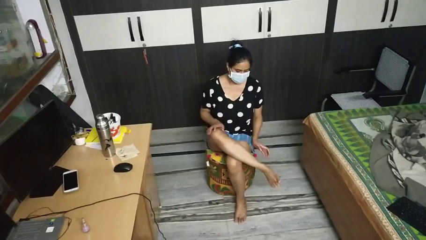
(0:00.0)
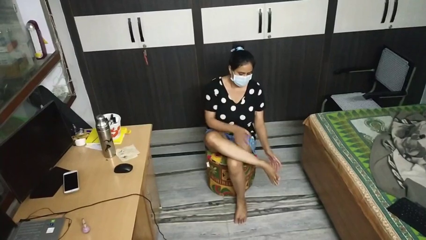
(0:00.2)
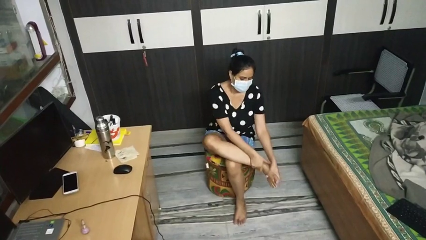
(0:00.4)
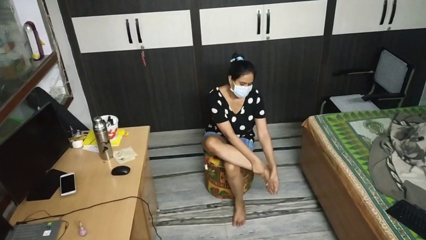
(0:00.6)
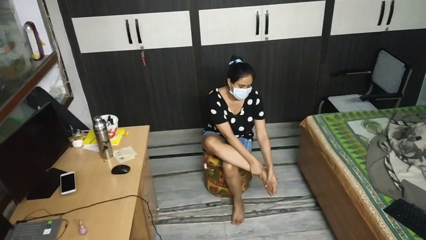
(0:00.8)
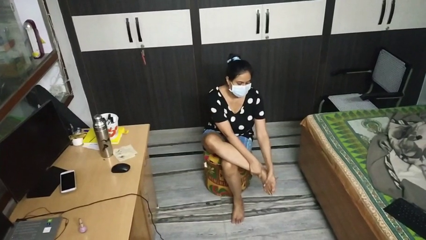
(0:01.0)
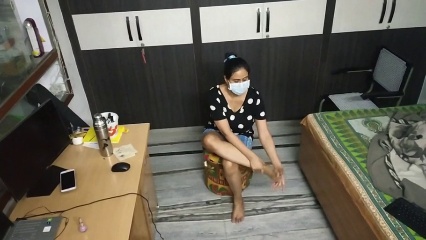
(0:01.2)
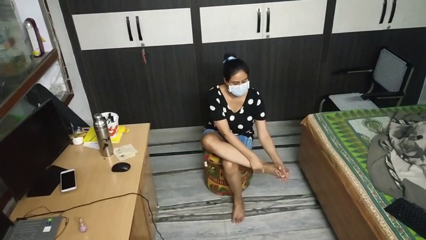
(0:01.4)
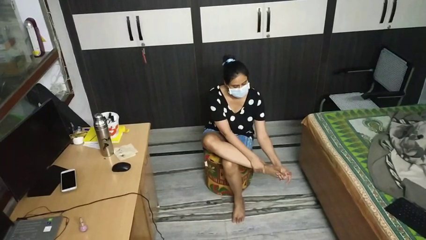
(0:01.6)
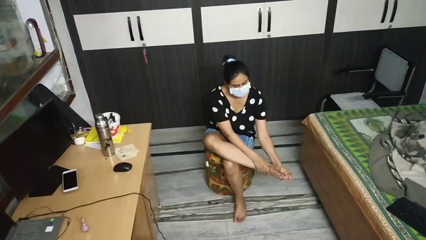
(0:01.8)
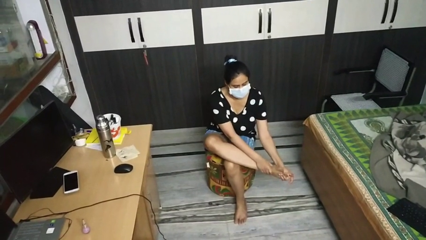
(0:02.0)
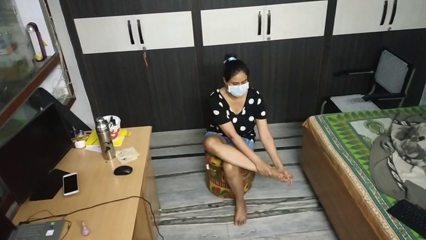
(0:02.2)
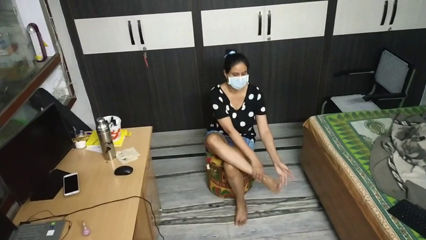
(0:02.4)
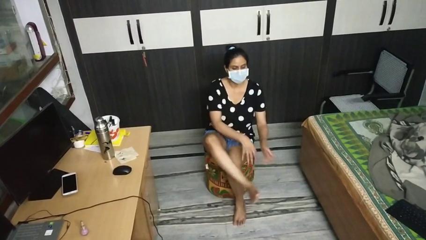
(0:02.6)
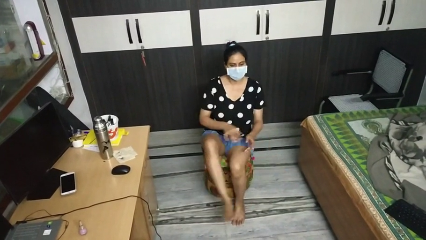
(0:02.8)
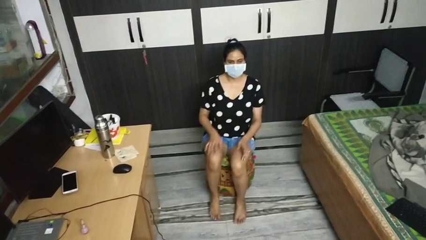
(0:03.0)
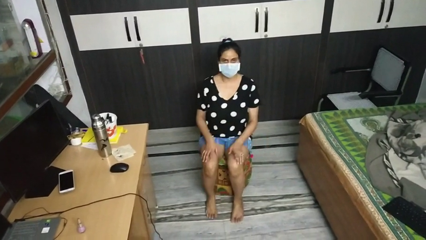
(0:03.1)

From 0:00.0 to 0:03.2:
person rubs foot

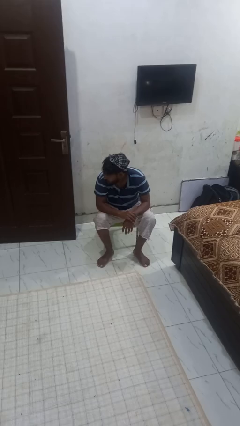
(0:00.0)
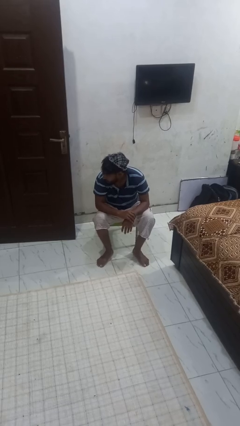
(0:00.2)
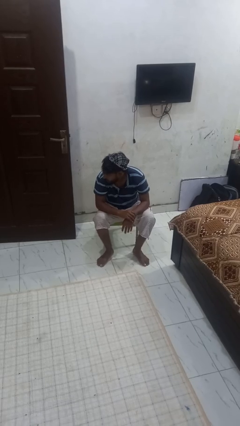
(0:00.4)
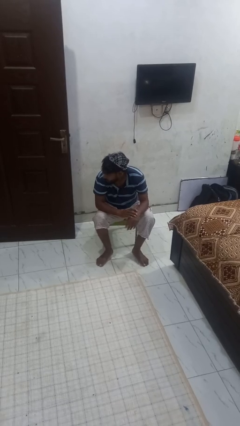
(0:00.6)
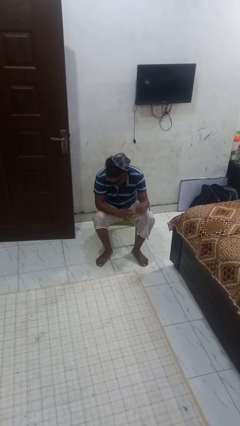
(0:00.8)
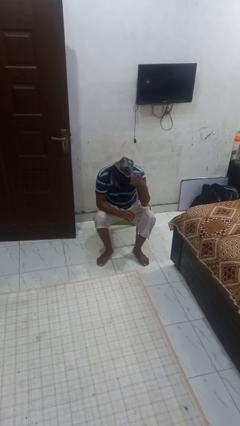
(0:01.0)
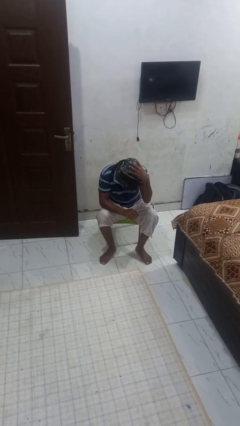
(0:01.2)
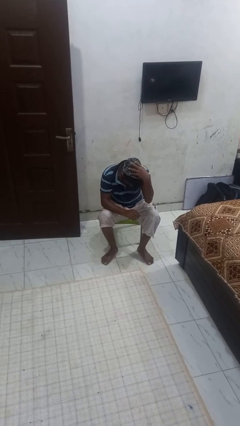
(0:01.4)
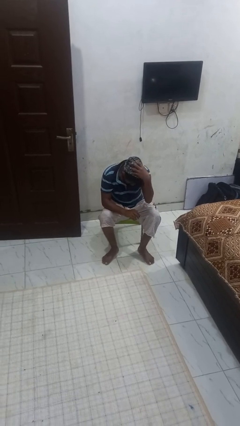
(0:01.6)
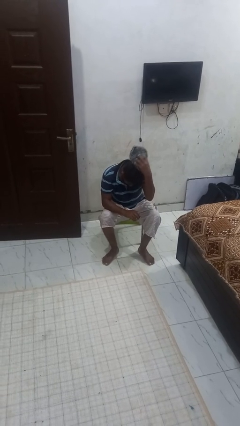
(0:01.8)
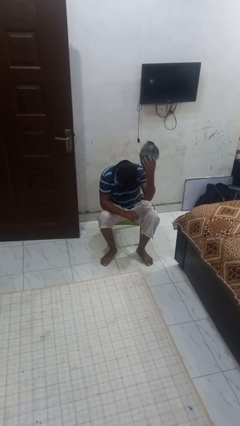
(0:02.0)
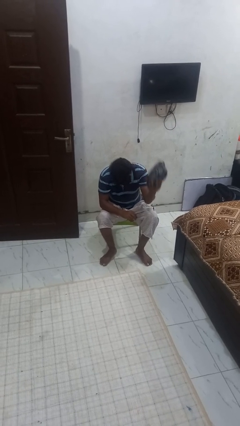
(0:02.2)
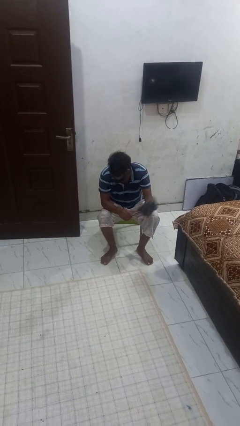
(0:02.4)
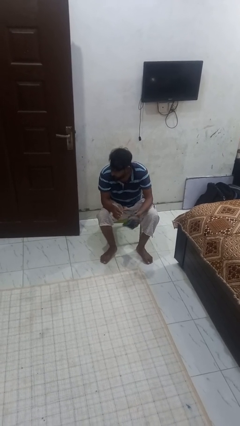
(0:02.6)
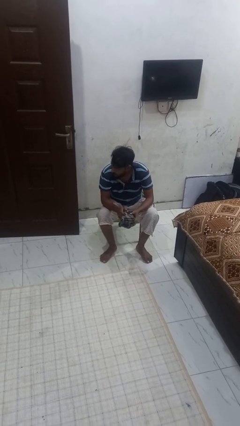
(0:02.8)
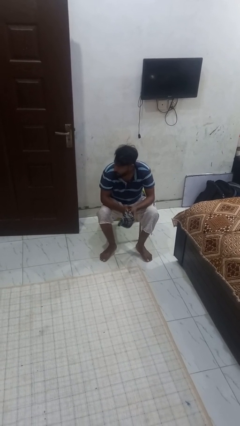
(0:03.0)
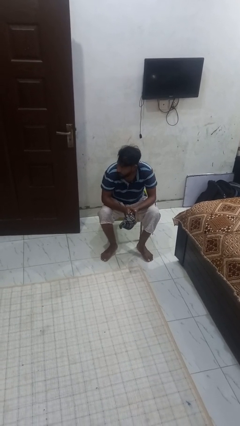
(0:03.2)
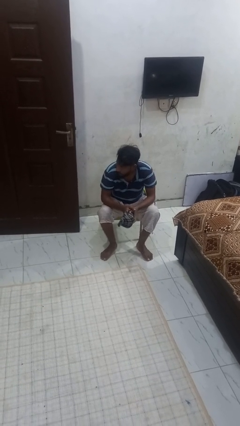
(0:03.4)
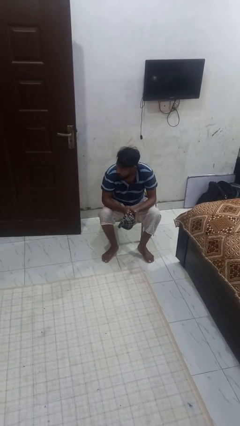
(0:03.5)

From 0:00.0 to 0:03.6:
person takes off hat

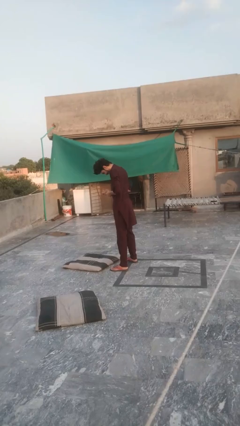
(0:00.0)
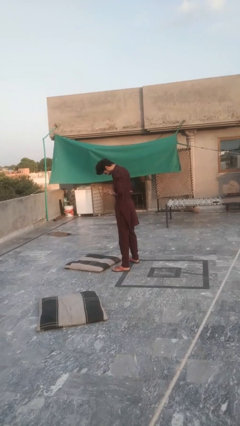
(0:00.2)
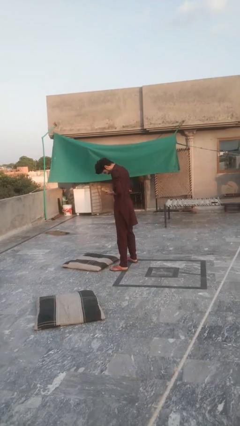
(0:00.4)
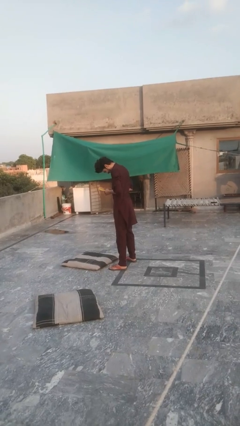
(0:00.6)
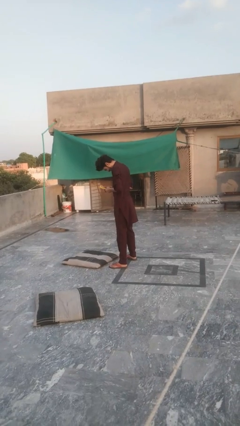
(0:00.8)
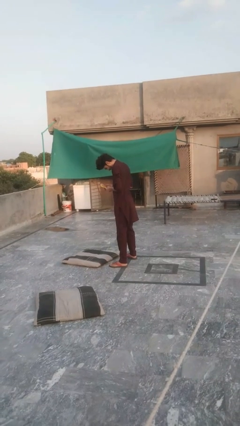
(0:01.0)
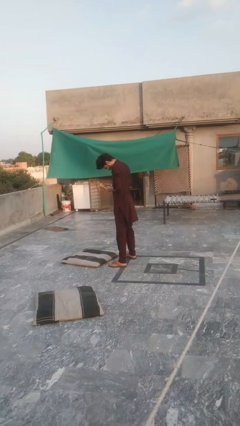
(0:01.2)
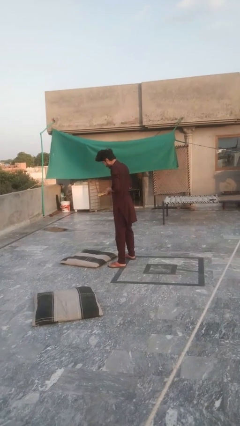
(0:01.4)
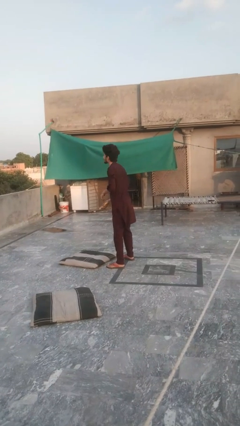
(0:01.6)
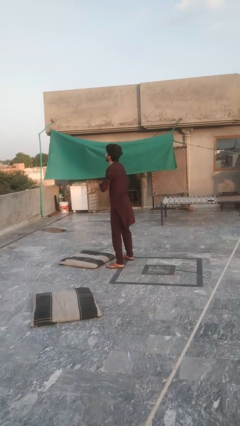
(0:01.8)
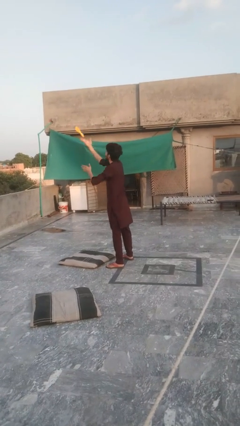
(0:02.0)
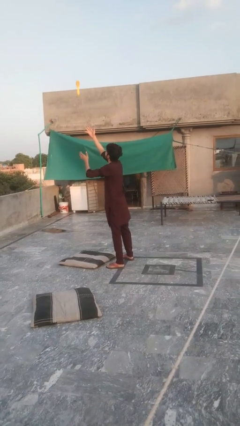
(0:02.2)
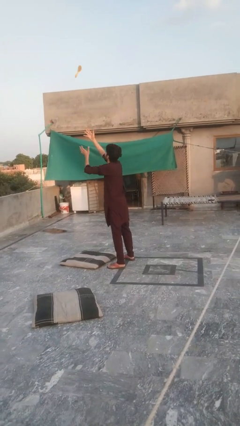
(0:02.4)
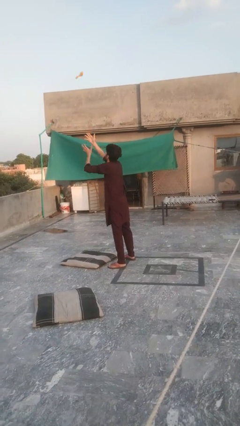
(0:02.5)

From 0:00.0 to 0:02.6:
person drops object

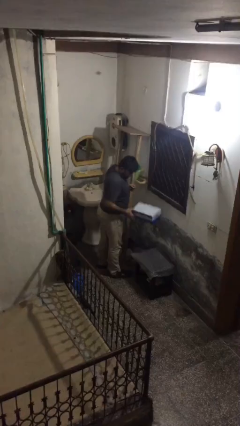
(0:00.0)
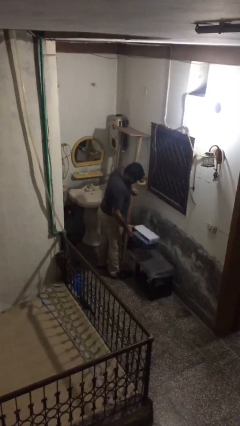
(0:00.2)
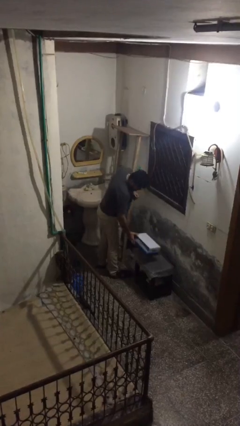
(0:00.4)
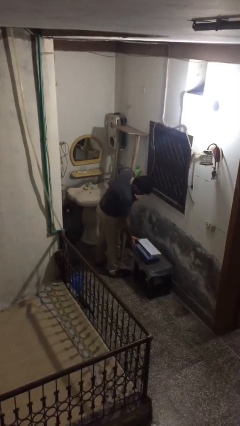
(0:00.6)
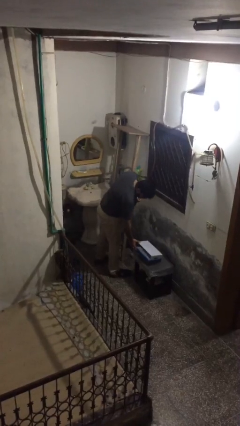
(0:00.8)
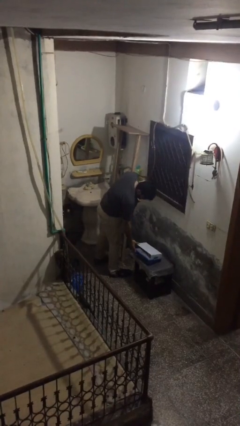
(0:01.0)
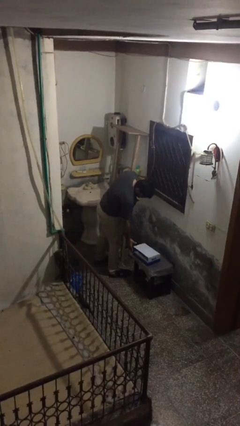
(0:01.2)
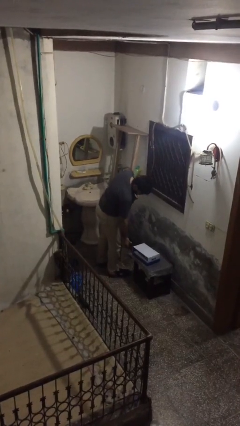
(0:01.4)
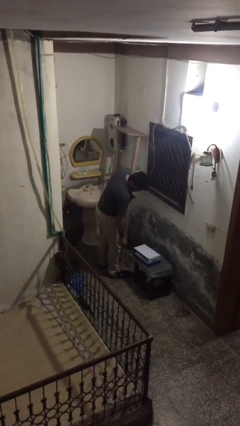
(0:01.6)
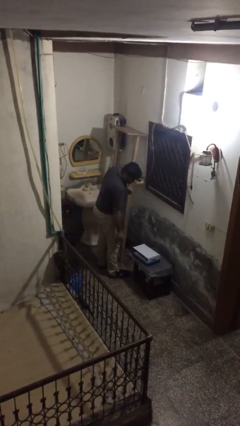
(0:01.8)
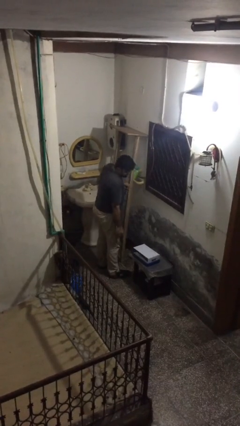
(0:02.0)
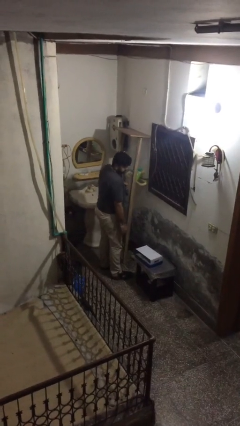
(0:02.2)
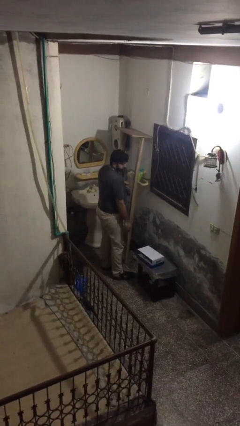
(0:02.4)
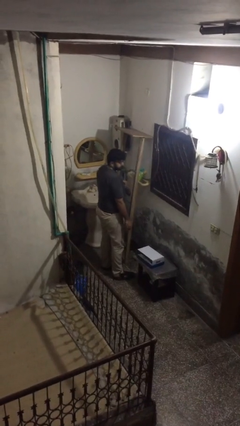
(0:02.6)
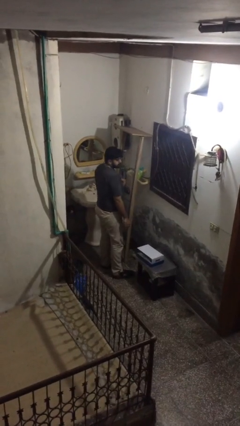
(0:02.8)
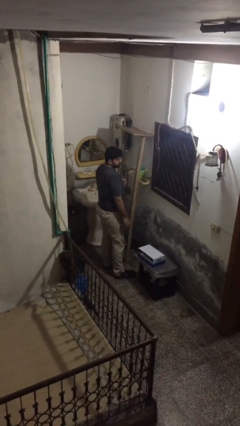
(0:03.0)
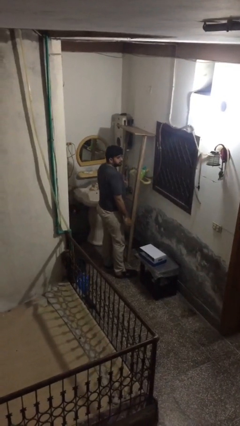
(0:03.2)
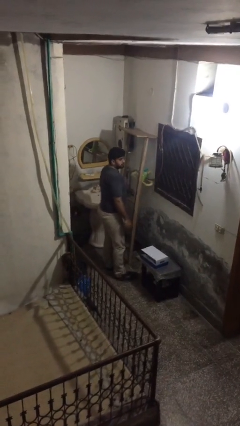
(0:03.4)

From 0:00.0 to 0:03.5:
person puts down object on table

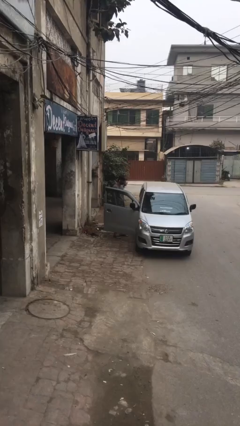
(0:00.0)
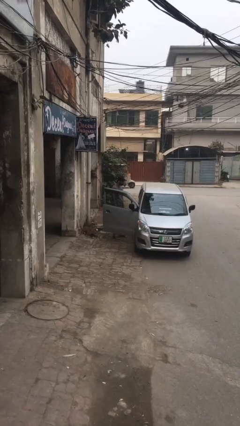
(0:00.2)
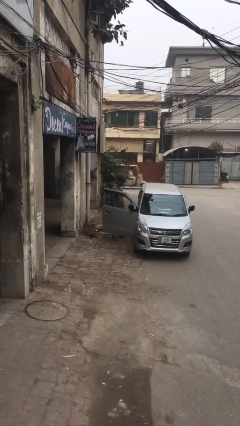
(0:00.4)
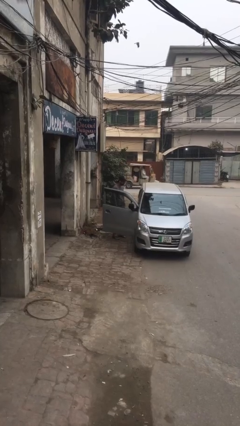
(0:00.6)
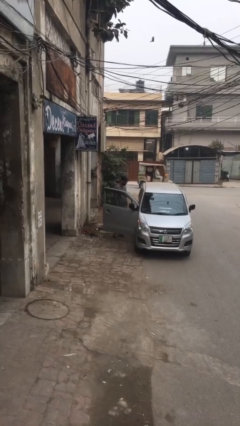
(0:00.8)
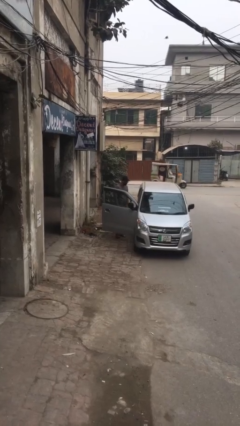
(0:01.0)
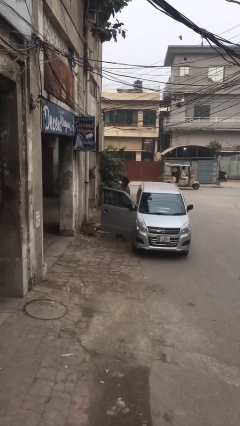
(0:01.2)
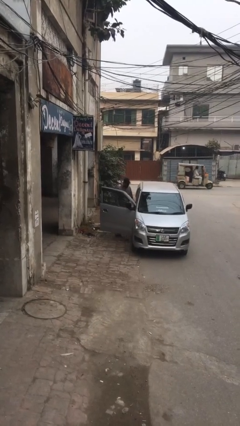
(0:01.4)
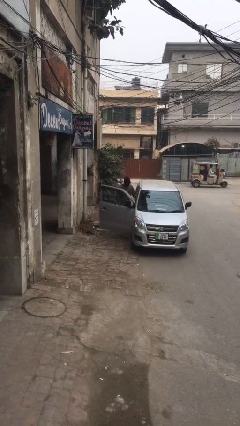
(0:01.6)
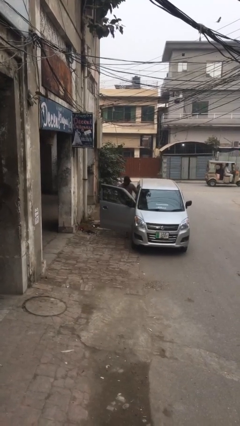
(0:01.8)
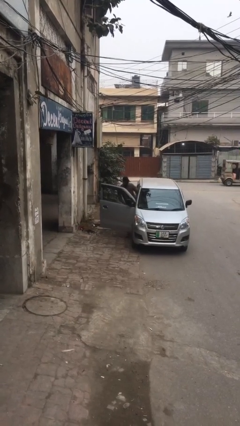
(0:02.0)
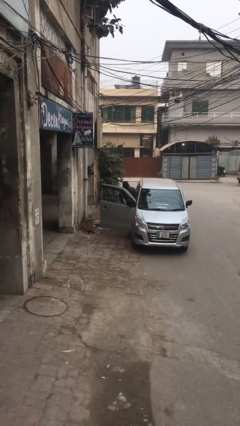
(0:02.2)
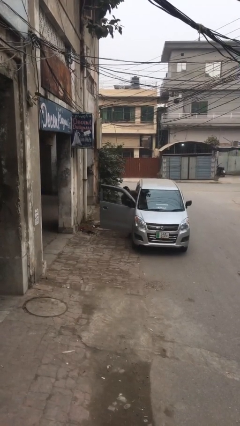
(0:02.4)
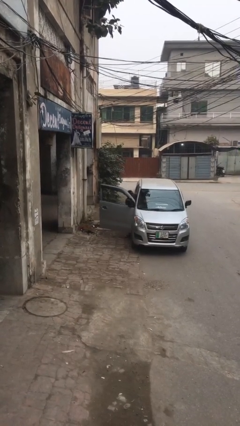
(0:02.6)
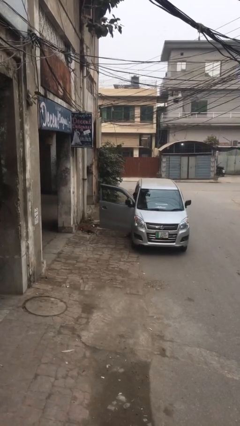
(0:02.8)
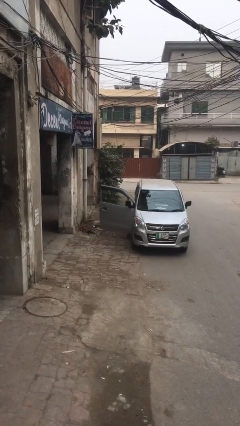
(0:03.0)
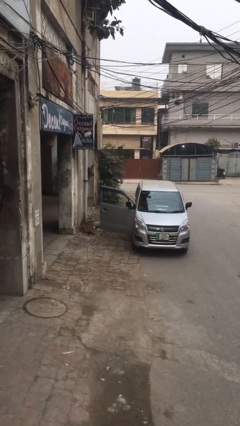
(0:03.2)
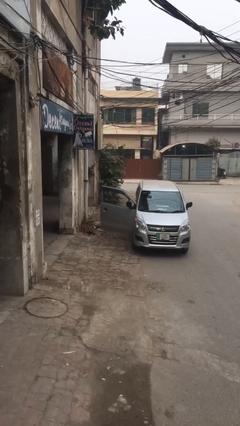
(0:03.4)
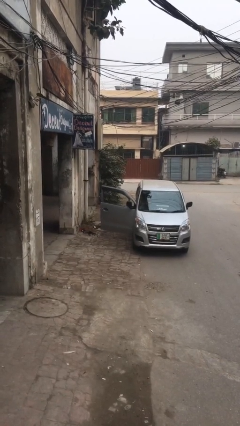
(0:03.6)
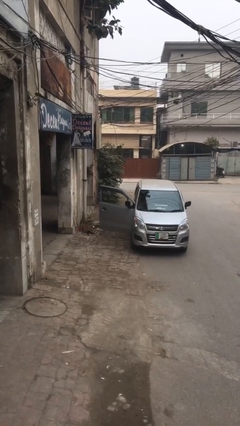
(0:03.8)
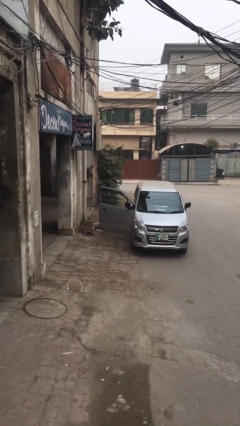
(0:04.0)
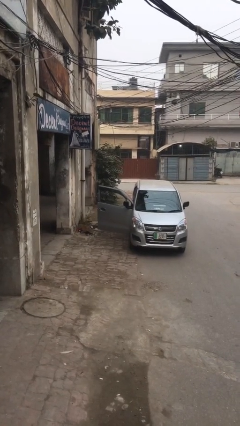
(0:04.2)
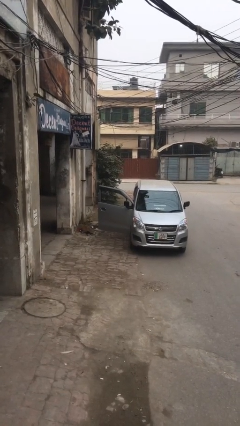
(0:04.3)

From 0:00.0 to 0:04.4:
person enters car
